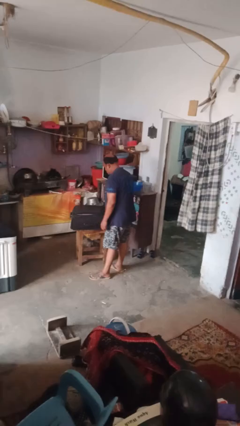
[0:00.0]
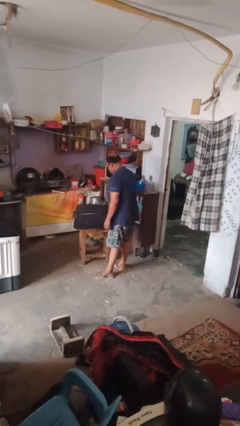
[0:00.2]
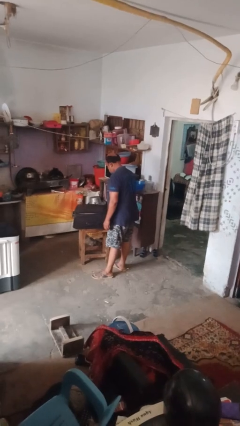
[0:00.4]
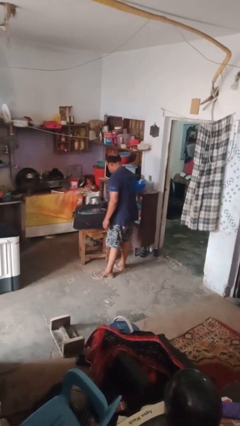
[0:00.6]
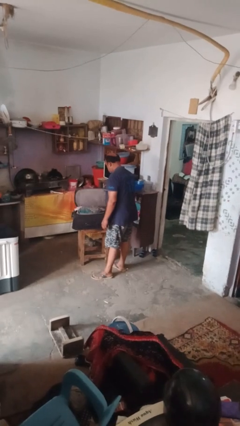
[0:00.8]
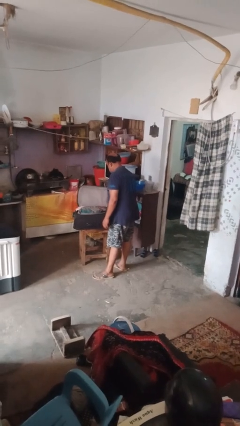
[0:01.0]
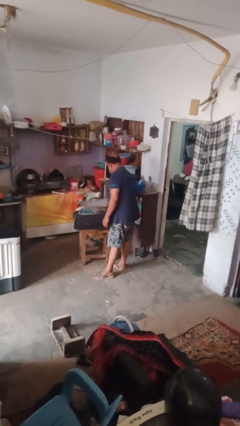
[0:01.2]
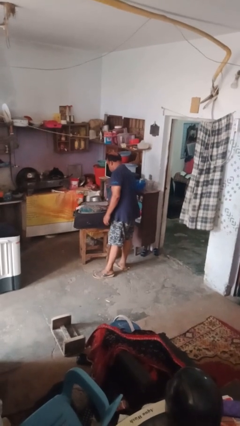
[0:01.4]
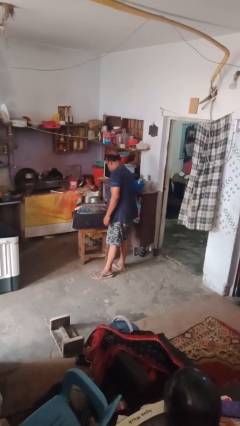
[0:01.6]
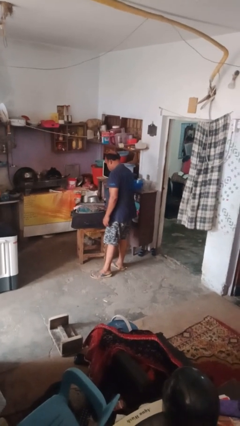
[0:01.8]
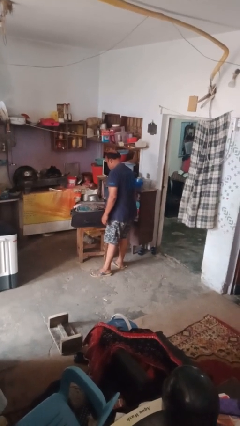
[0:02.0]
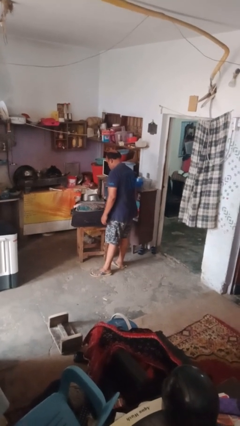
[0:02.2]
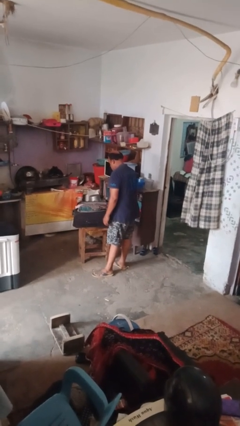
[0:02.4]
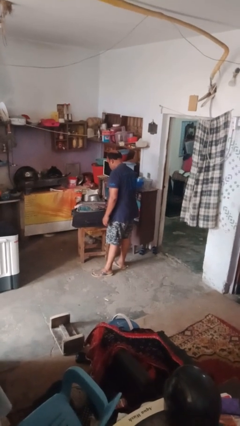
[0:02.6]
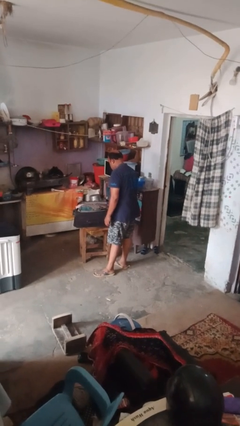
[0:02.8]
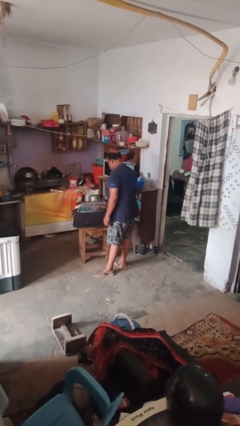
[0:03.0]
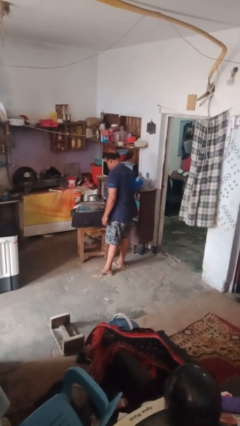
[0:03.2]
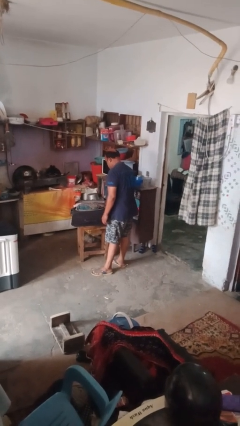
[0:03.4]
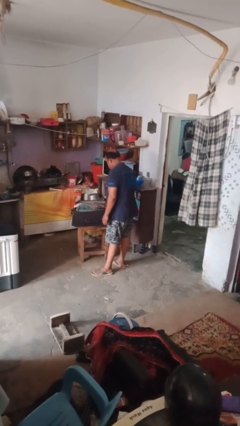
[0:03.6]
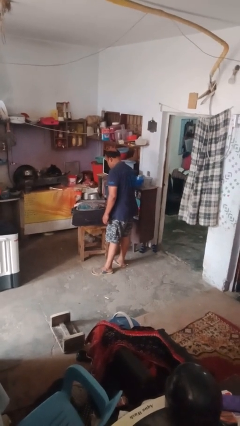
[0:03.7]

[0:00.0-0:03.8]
person opens suitcase

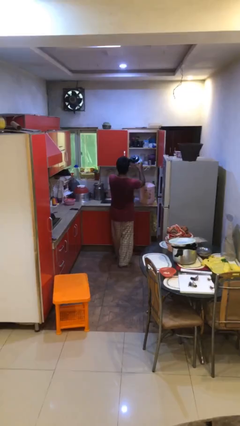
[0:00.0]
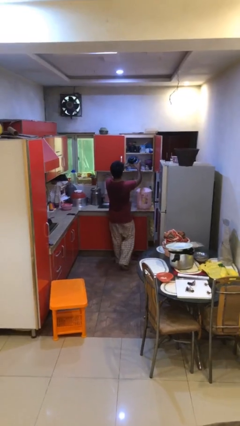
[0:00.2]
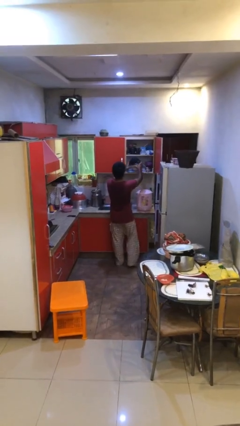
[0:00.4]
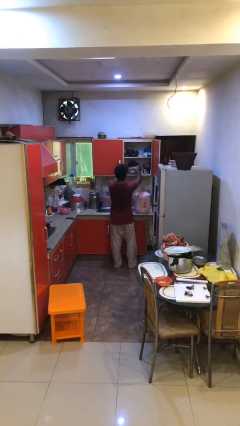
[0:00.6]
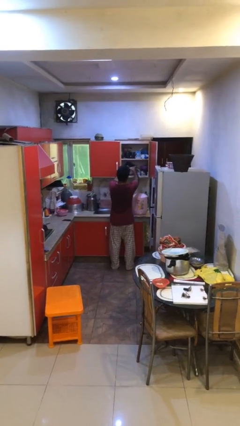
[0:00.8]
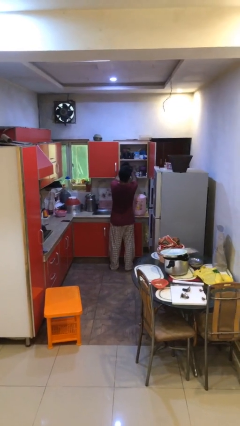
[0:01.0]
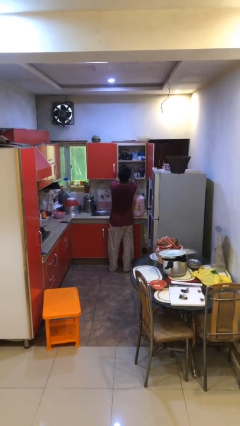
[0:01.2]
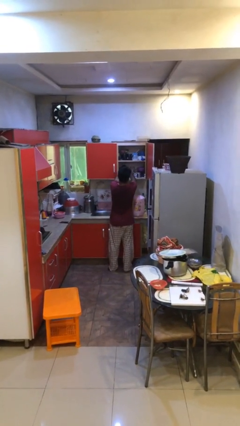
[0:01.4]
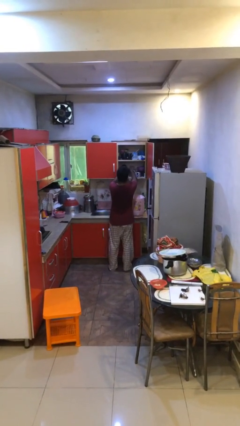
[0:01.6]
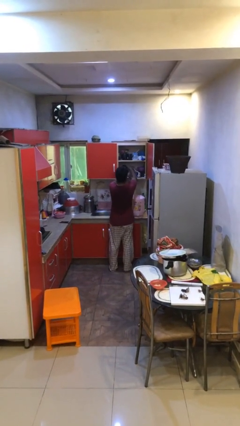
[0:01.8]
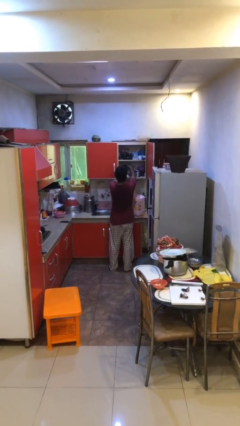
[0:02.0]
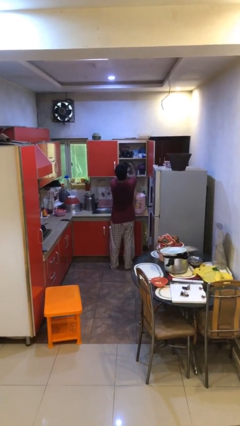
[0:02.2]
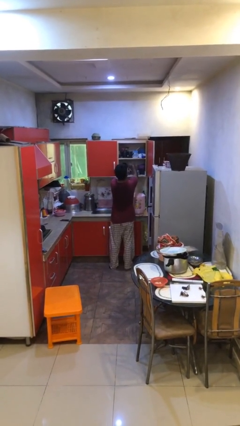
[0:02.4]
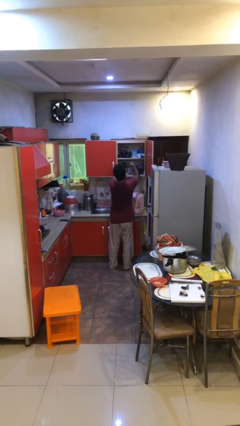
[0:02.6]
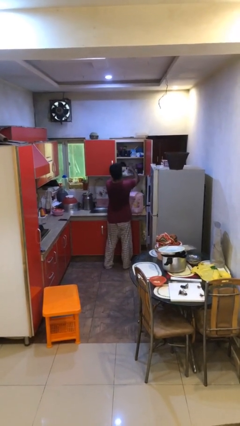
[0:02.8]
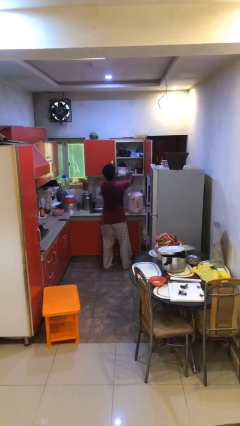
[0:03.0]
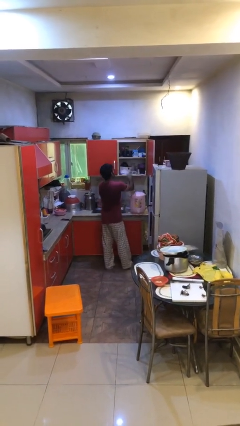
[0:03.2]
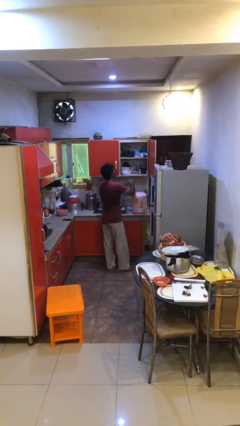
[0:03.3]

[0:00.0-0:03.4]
person puts down object on shelf

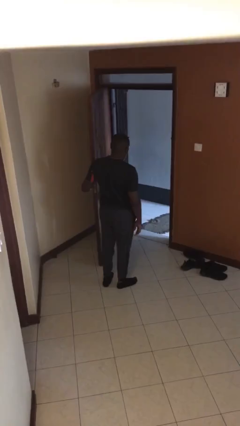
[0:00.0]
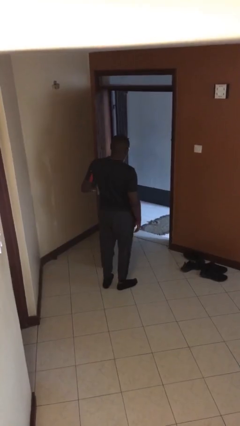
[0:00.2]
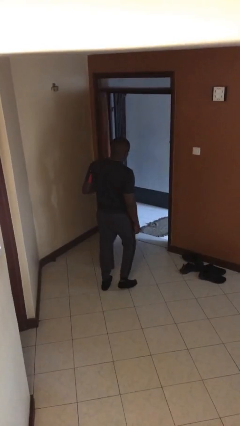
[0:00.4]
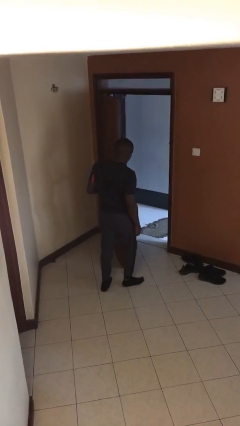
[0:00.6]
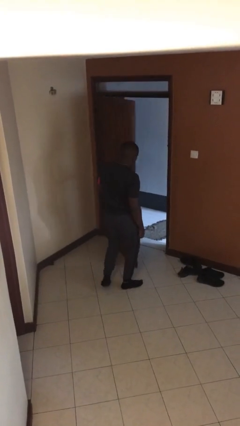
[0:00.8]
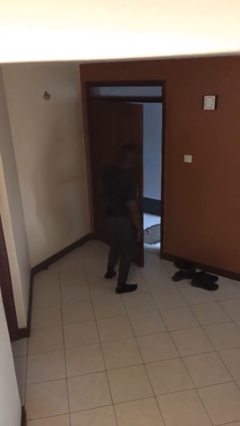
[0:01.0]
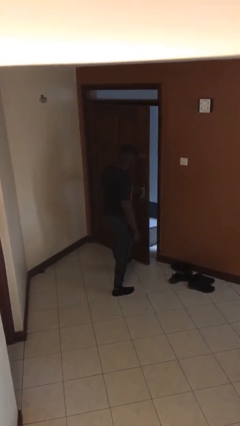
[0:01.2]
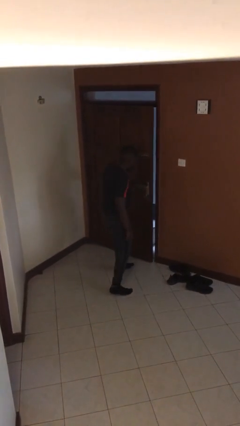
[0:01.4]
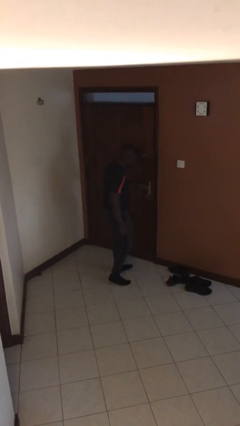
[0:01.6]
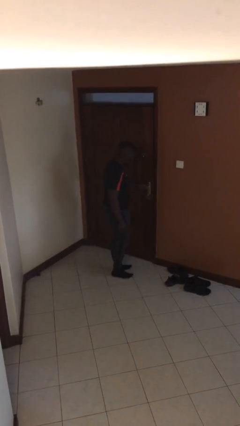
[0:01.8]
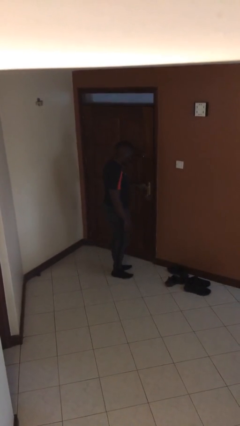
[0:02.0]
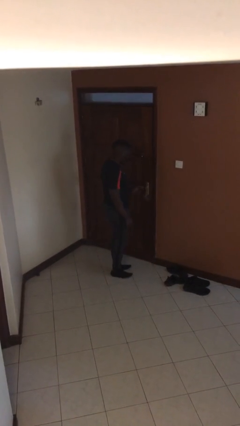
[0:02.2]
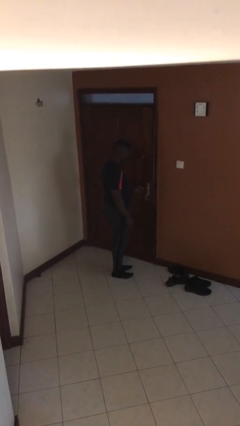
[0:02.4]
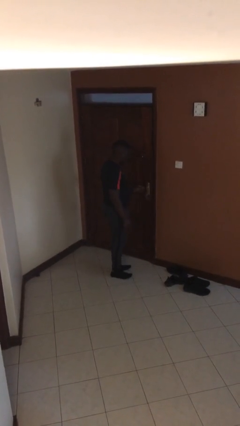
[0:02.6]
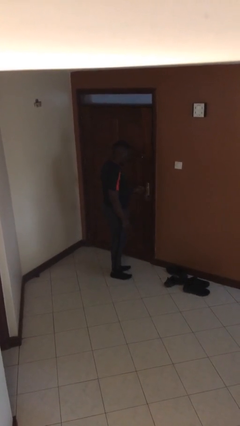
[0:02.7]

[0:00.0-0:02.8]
person closes facility door

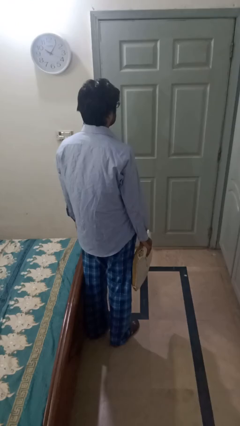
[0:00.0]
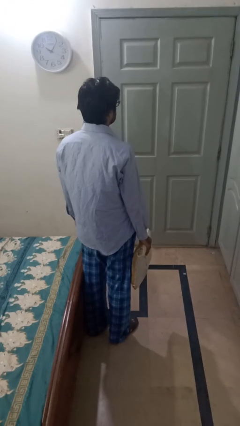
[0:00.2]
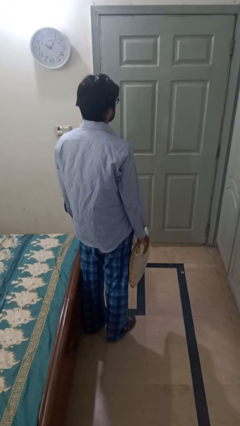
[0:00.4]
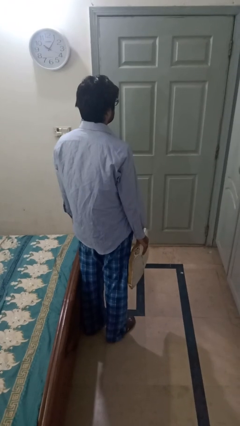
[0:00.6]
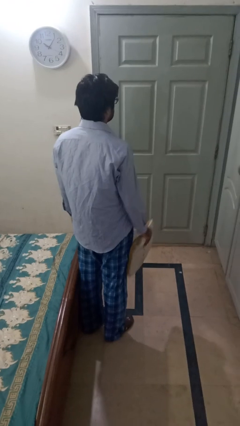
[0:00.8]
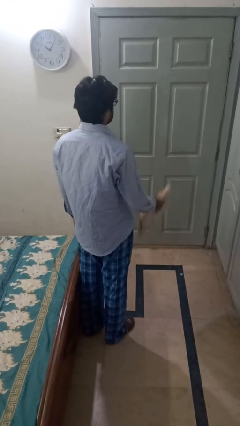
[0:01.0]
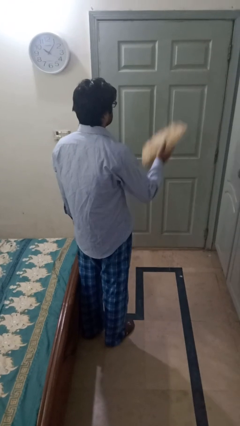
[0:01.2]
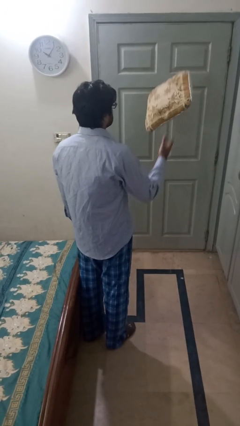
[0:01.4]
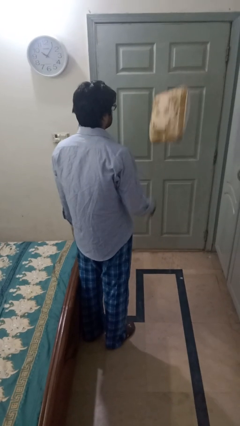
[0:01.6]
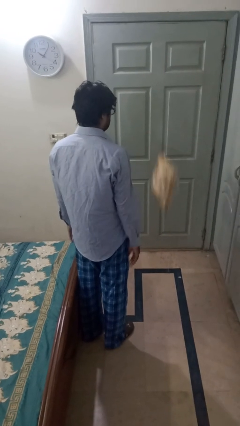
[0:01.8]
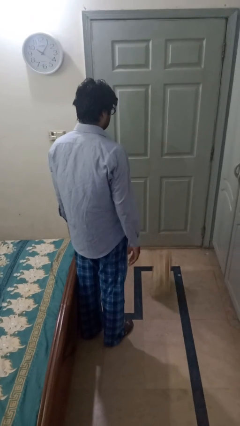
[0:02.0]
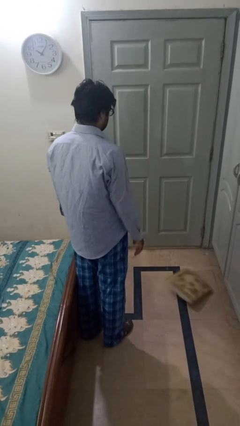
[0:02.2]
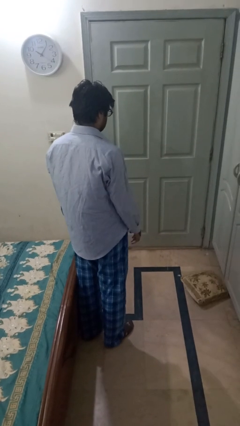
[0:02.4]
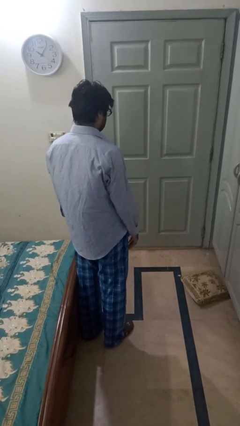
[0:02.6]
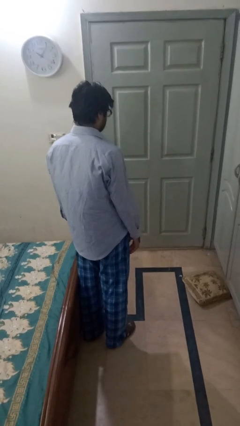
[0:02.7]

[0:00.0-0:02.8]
person throws object into air

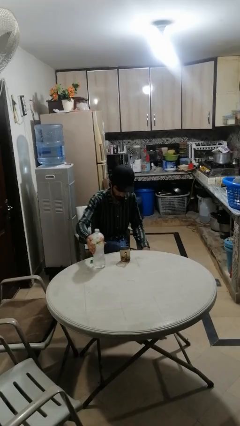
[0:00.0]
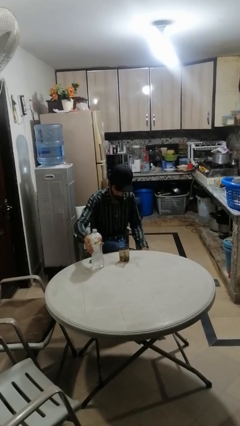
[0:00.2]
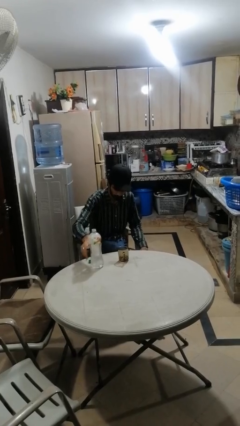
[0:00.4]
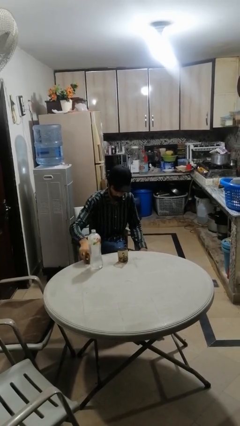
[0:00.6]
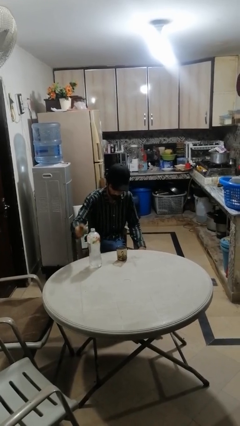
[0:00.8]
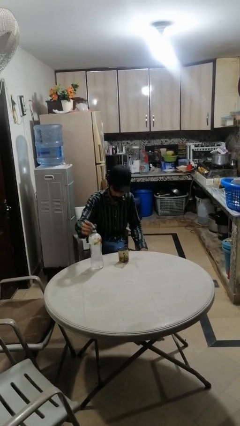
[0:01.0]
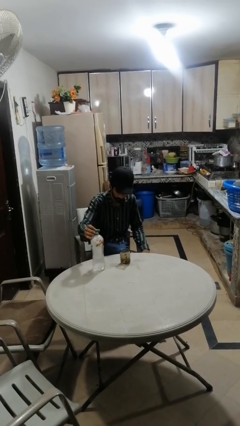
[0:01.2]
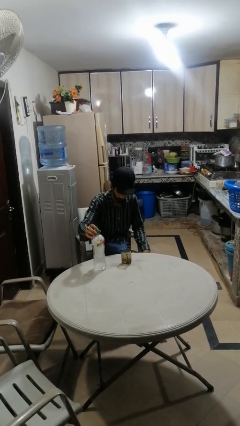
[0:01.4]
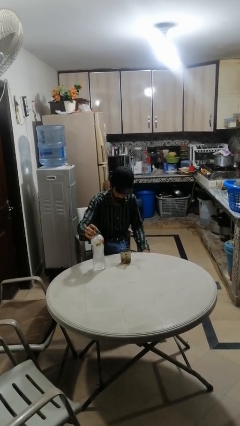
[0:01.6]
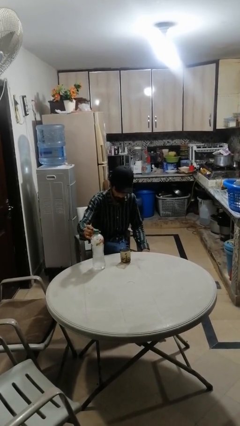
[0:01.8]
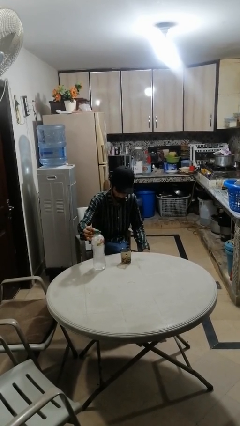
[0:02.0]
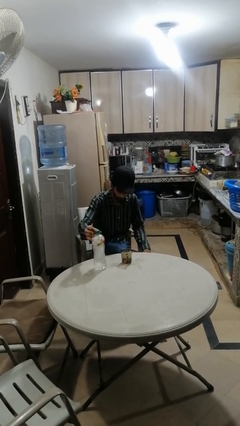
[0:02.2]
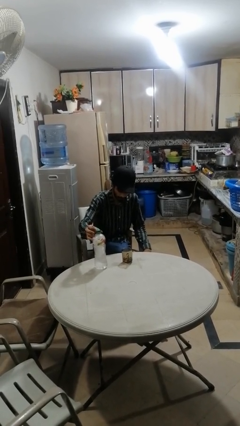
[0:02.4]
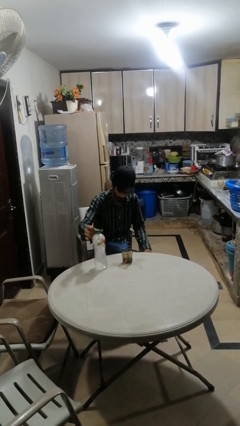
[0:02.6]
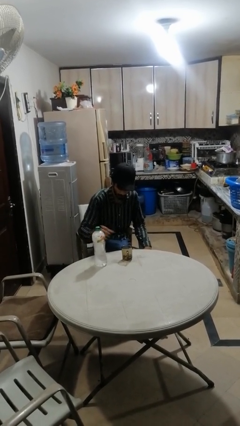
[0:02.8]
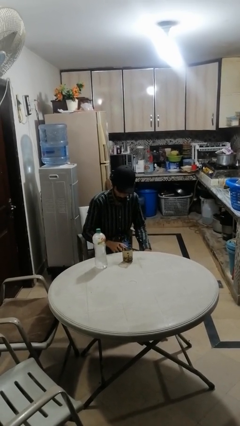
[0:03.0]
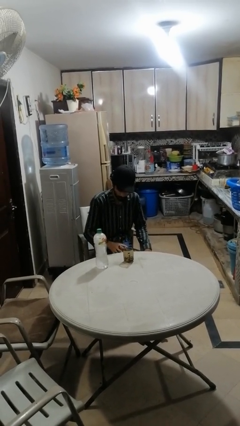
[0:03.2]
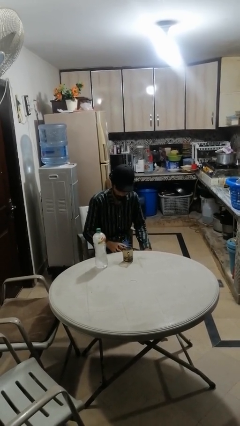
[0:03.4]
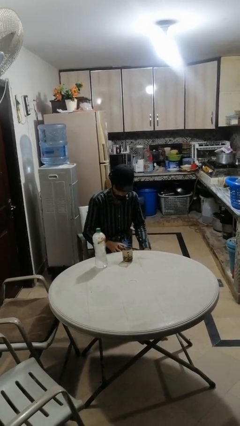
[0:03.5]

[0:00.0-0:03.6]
person screws lid to bottle

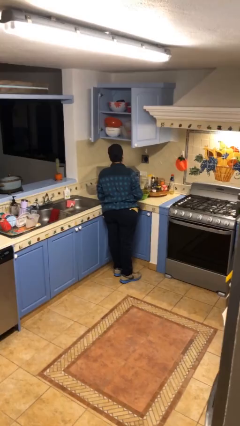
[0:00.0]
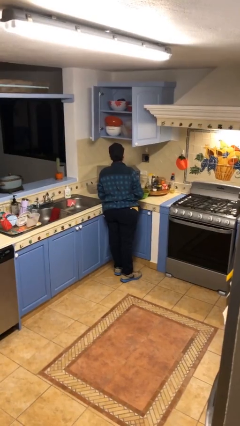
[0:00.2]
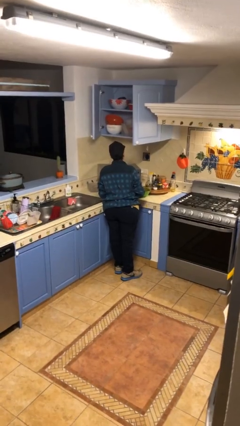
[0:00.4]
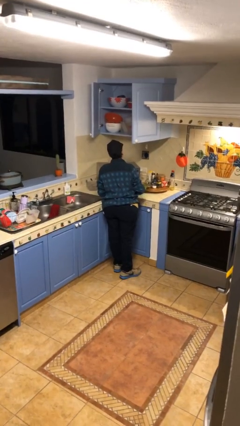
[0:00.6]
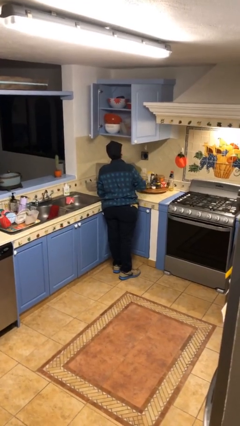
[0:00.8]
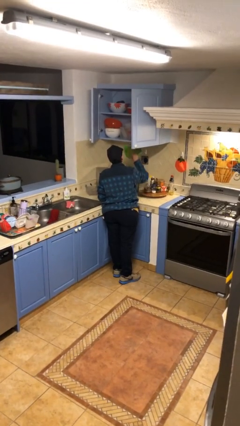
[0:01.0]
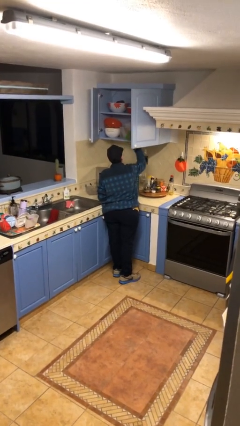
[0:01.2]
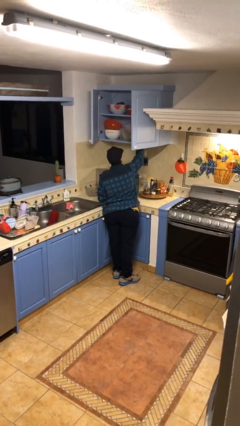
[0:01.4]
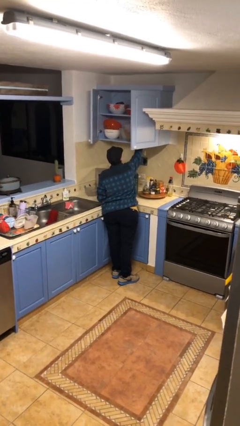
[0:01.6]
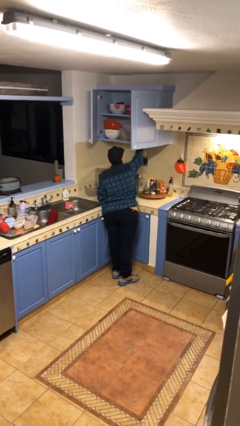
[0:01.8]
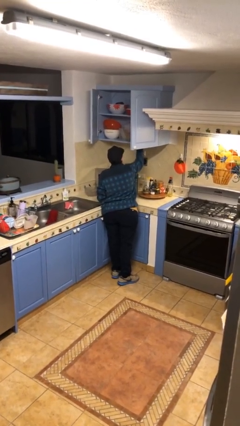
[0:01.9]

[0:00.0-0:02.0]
person puts object in cabinet
